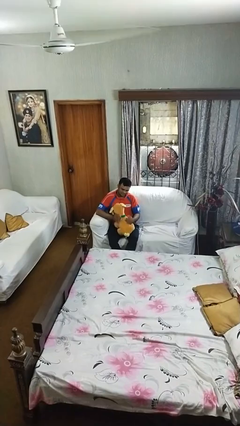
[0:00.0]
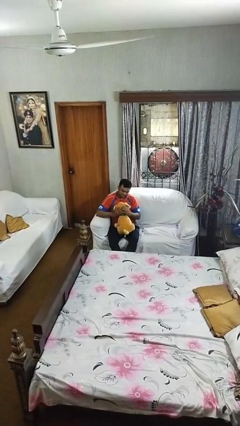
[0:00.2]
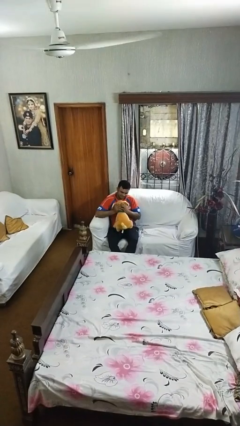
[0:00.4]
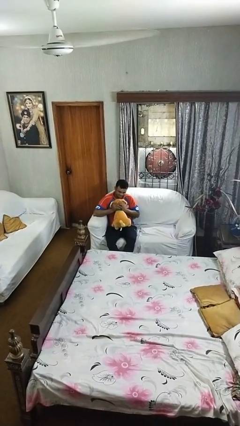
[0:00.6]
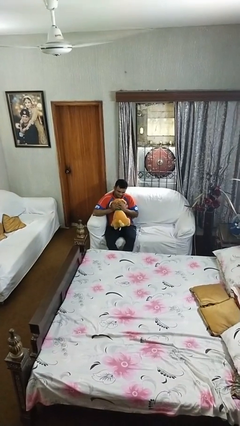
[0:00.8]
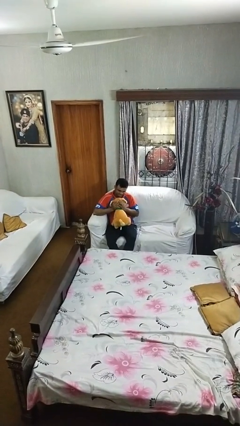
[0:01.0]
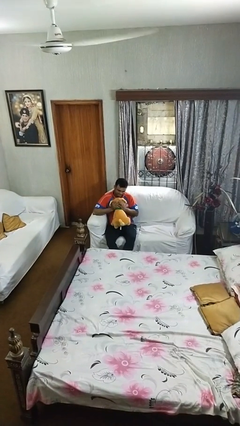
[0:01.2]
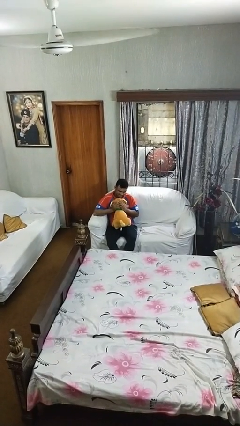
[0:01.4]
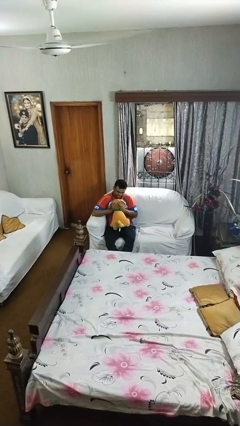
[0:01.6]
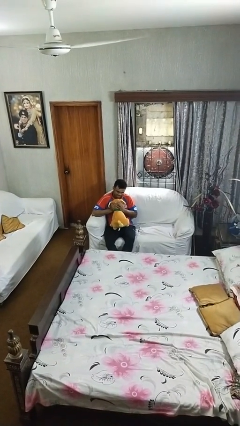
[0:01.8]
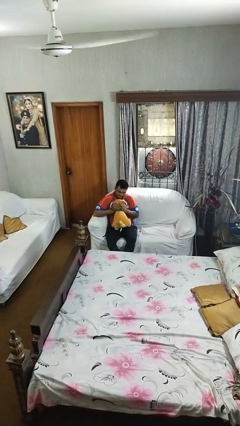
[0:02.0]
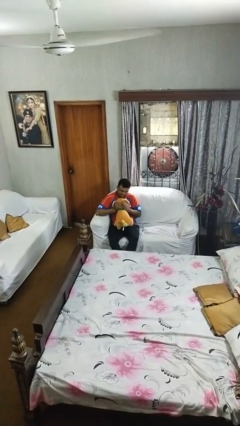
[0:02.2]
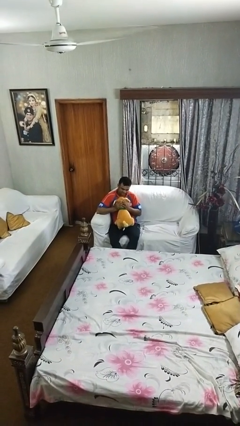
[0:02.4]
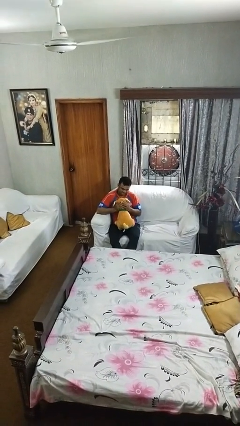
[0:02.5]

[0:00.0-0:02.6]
person hugs stuffed animal

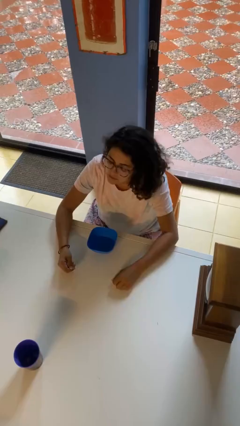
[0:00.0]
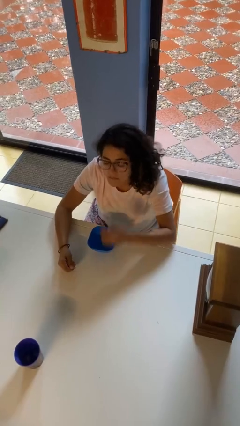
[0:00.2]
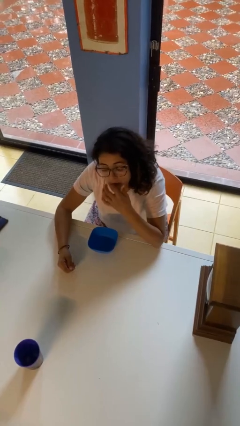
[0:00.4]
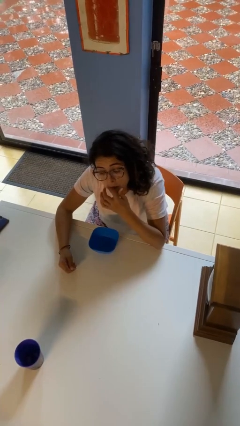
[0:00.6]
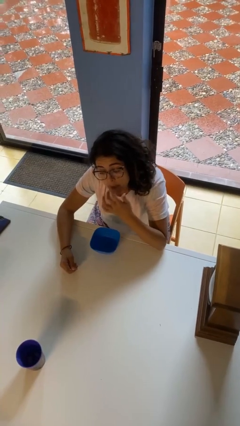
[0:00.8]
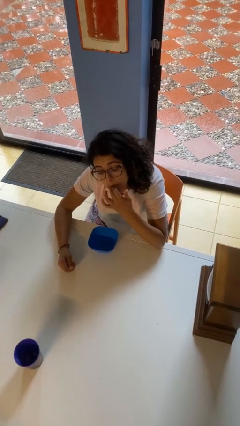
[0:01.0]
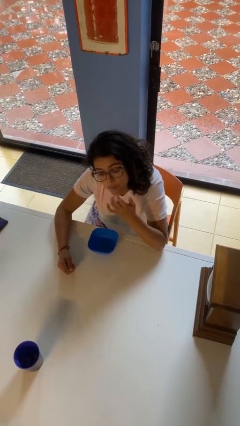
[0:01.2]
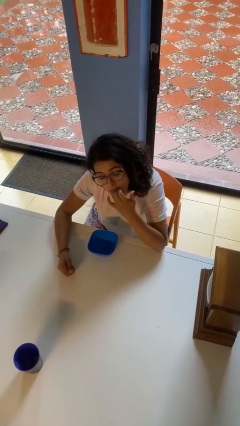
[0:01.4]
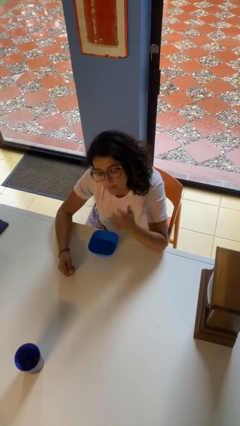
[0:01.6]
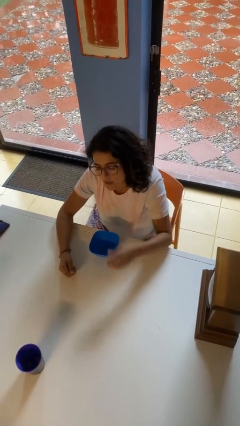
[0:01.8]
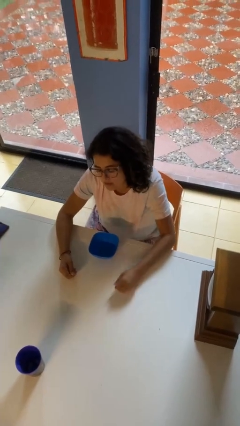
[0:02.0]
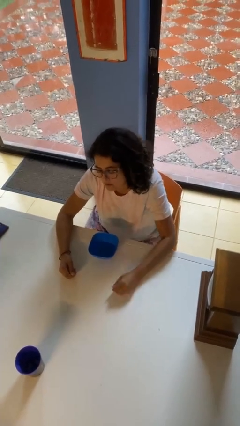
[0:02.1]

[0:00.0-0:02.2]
person licks fingers

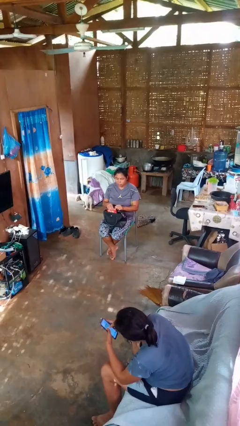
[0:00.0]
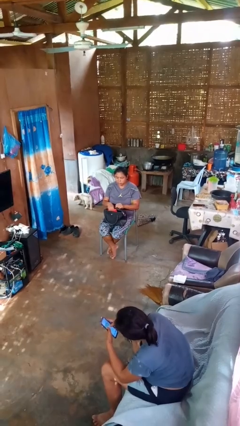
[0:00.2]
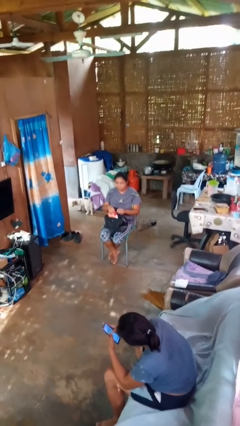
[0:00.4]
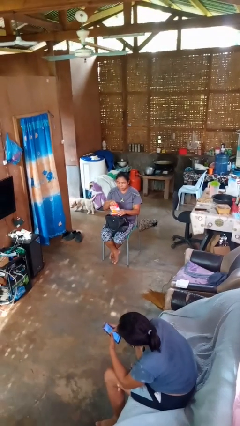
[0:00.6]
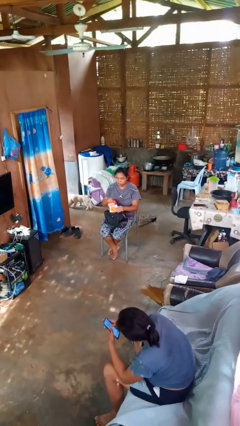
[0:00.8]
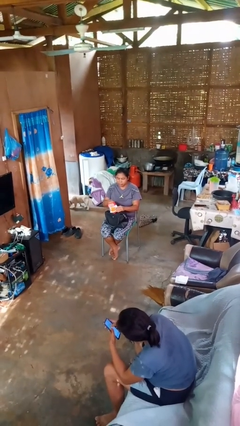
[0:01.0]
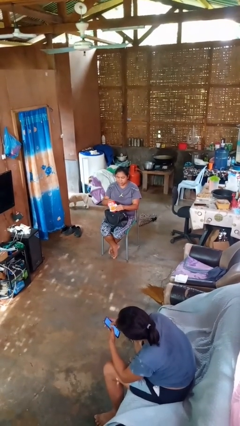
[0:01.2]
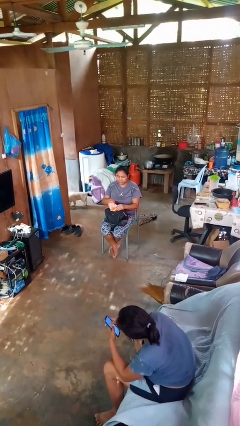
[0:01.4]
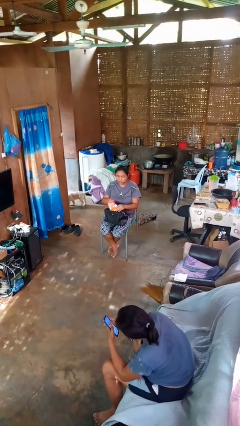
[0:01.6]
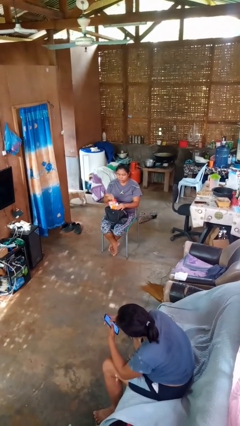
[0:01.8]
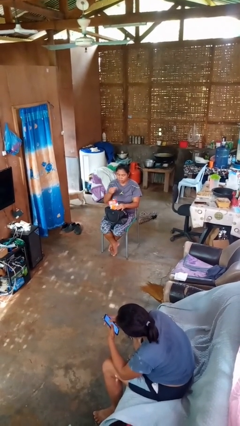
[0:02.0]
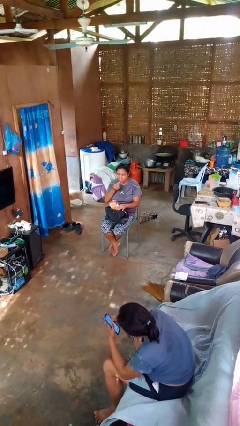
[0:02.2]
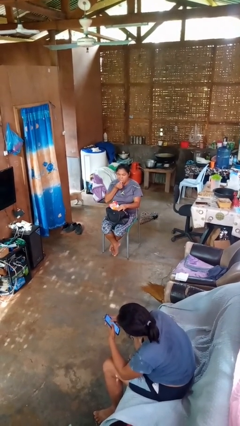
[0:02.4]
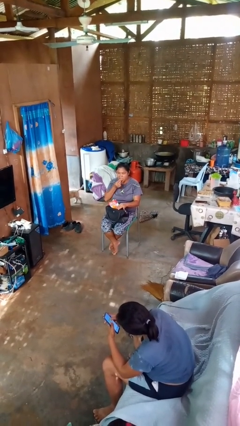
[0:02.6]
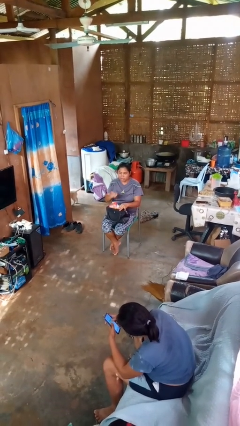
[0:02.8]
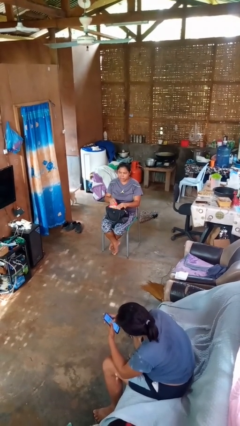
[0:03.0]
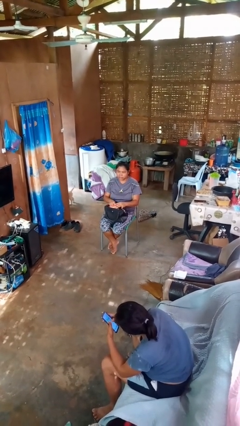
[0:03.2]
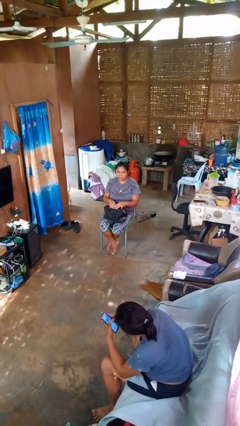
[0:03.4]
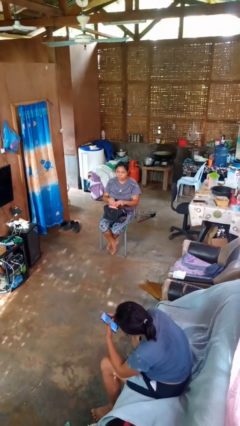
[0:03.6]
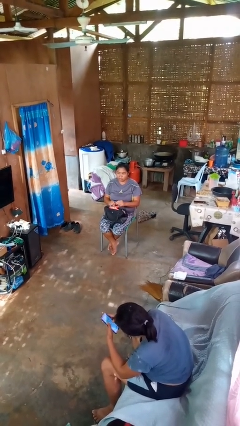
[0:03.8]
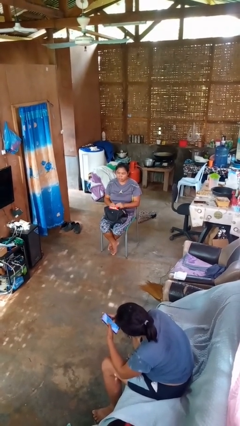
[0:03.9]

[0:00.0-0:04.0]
person eats snack from bag

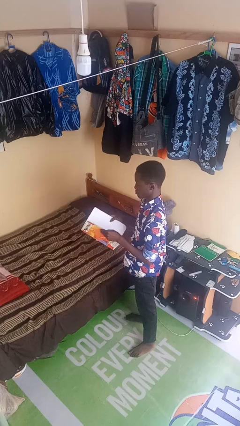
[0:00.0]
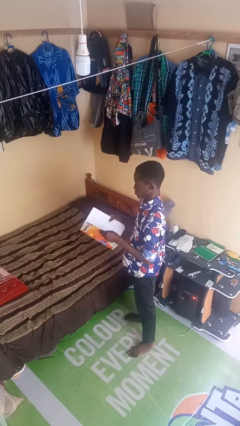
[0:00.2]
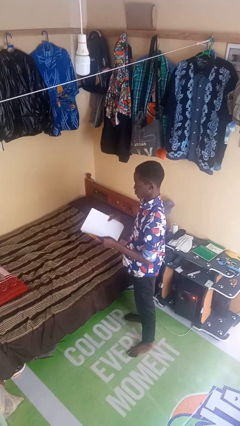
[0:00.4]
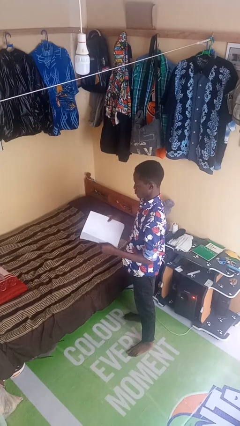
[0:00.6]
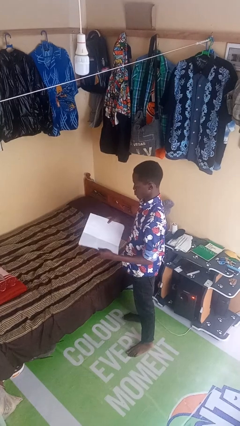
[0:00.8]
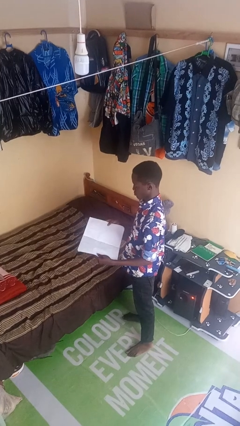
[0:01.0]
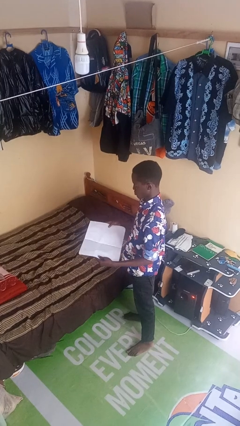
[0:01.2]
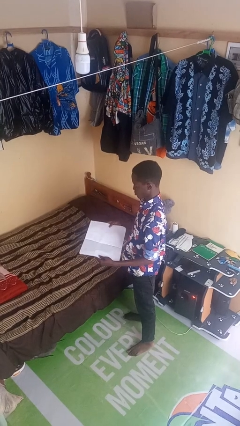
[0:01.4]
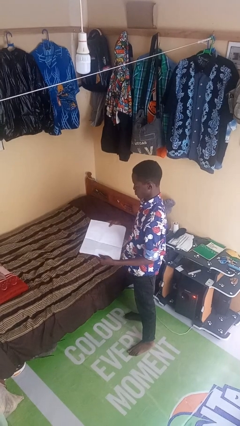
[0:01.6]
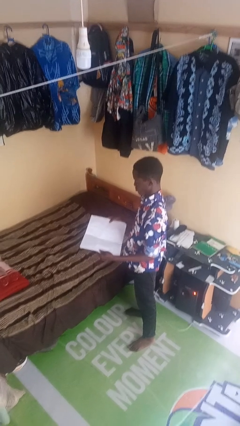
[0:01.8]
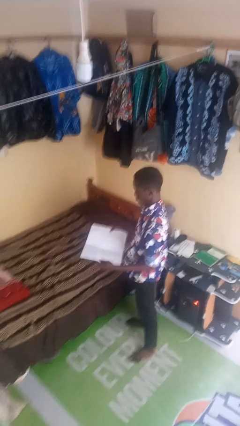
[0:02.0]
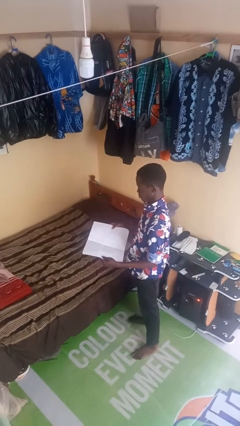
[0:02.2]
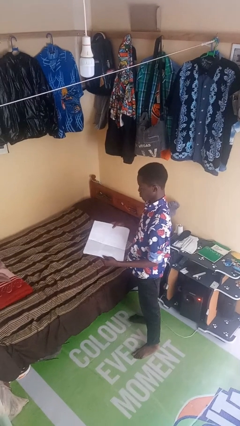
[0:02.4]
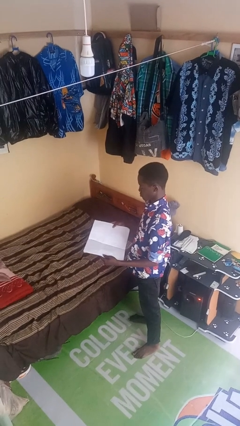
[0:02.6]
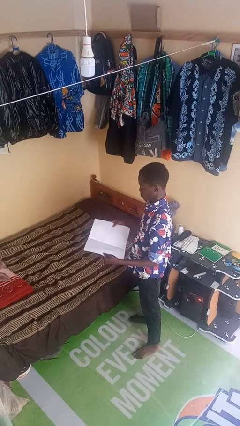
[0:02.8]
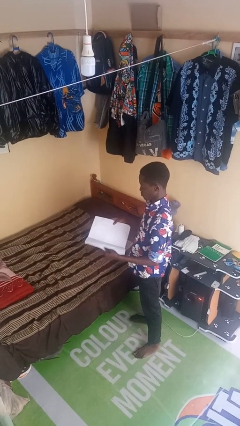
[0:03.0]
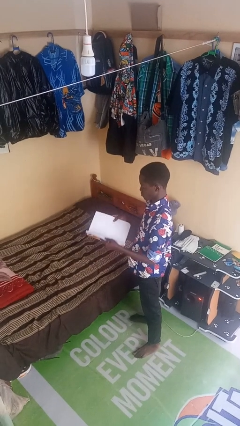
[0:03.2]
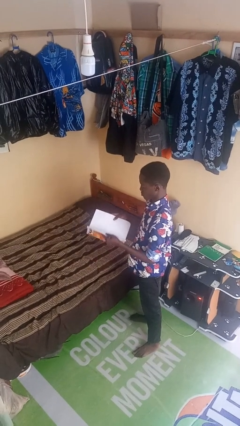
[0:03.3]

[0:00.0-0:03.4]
person reads book

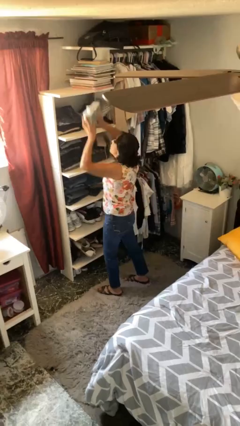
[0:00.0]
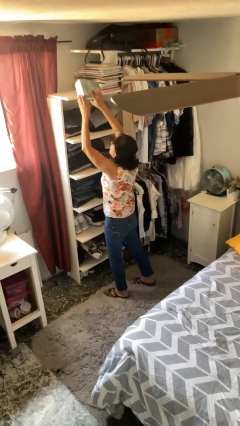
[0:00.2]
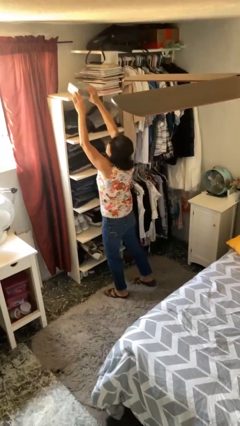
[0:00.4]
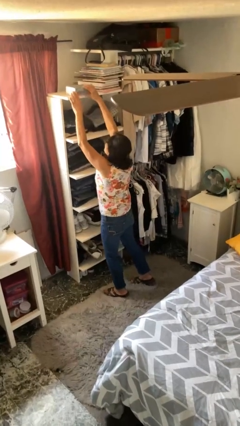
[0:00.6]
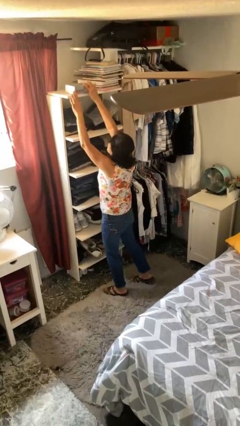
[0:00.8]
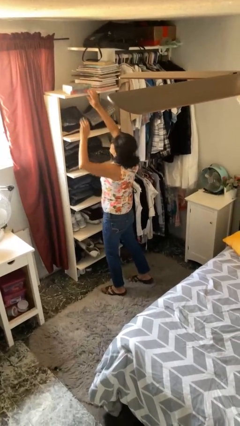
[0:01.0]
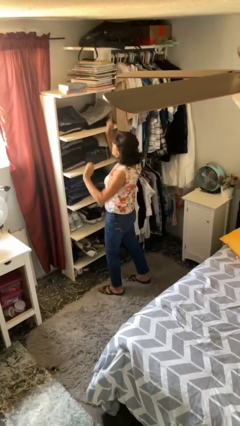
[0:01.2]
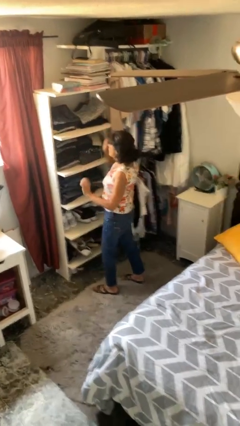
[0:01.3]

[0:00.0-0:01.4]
person puts down object on shelf

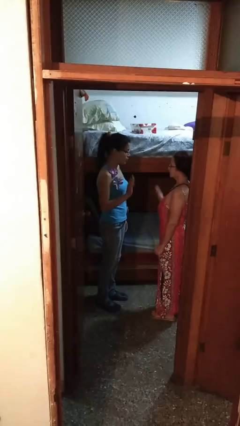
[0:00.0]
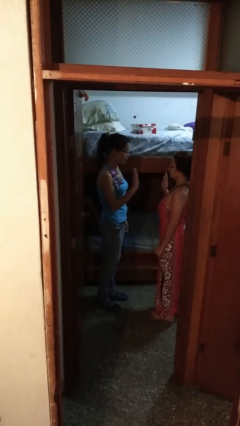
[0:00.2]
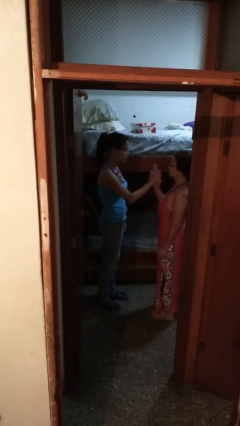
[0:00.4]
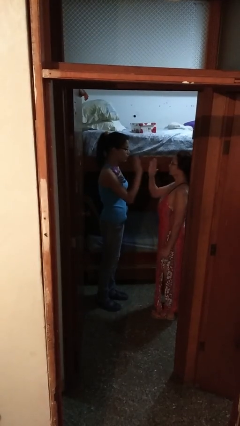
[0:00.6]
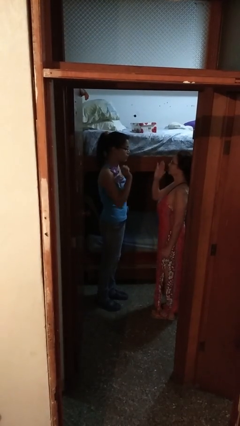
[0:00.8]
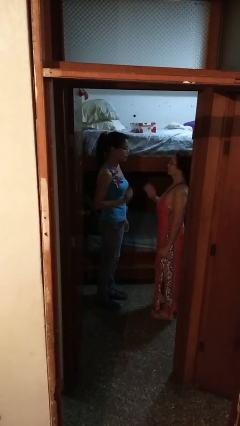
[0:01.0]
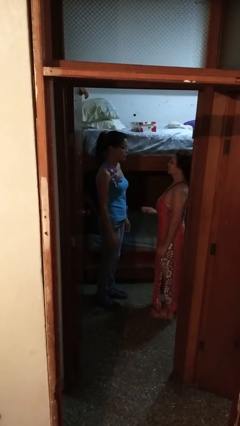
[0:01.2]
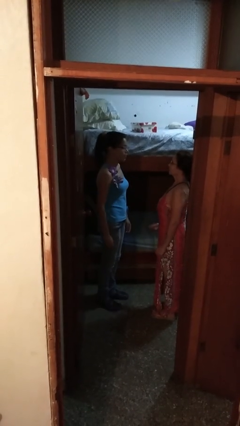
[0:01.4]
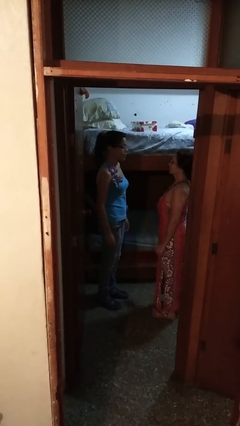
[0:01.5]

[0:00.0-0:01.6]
person highfives hand

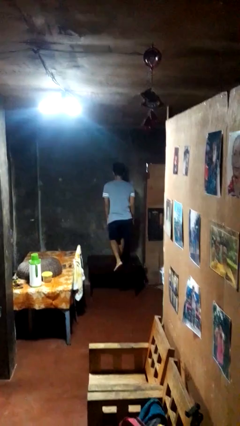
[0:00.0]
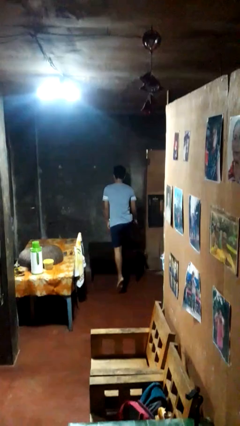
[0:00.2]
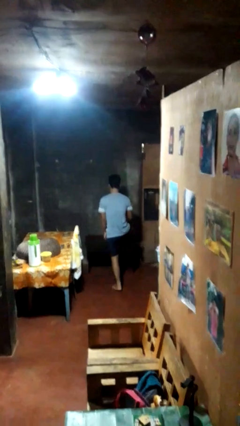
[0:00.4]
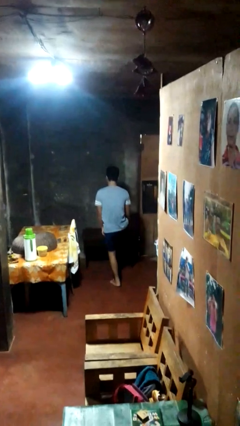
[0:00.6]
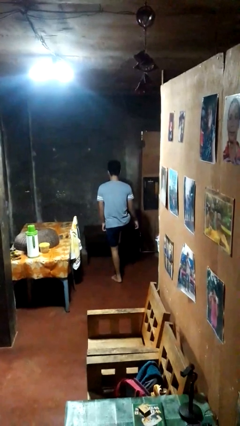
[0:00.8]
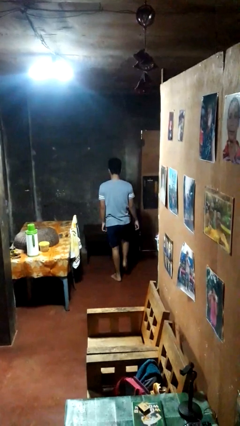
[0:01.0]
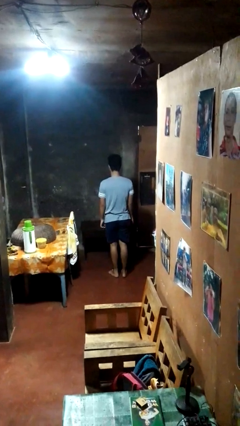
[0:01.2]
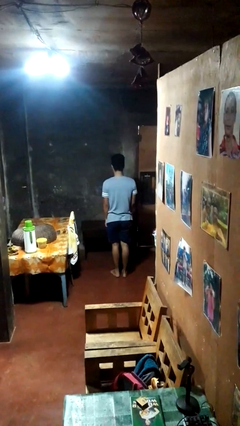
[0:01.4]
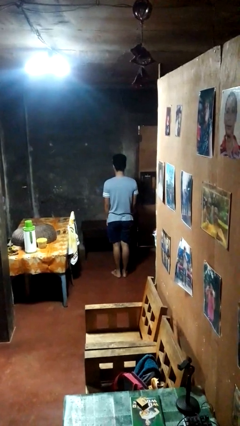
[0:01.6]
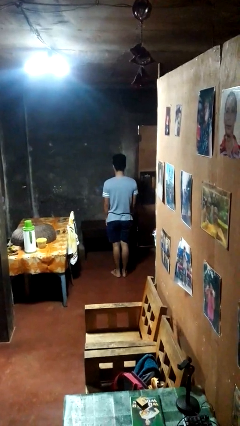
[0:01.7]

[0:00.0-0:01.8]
person climbs off table

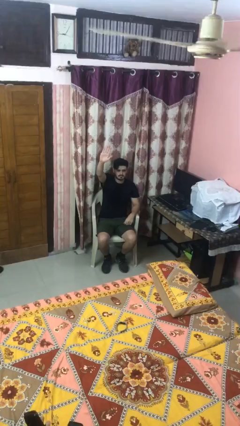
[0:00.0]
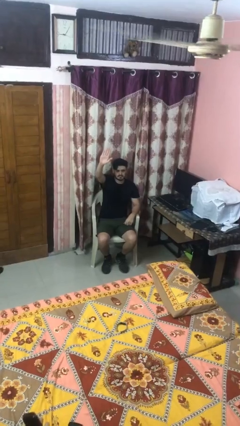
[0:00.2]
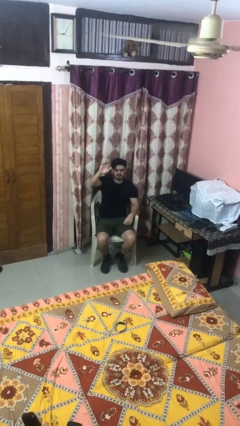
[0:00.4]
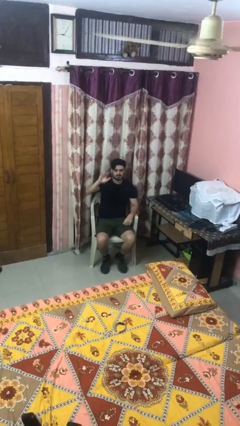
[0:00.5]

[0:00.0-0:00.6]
person gestures lower hand
